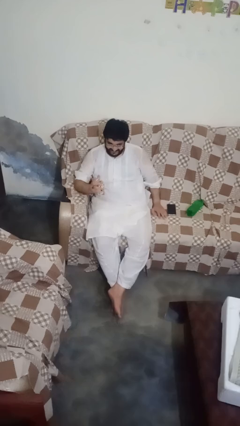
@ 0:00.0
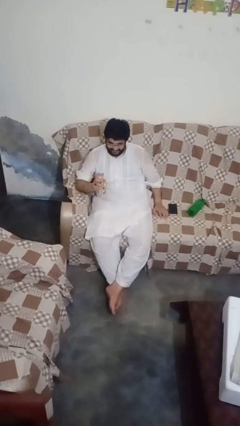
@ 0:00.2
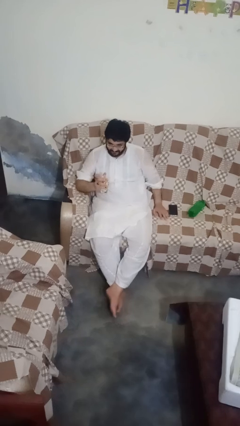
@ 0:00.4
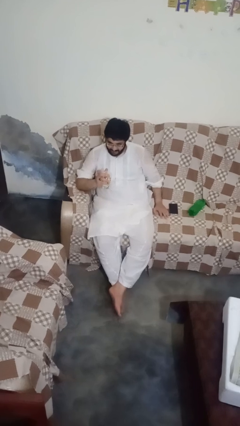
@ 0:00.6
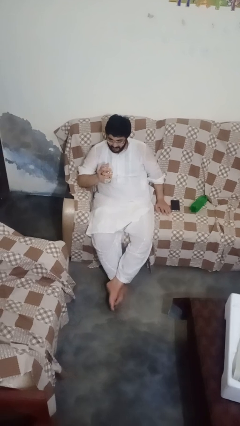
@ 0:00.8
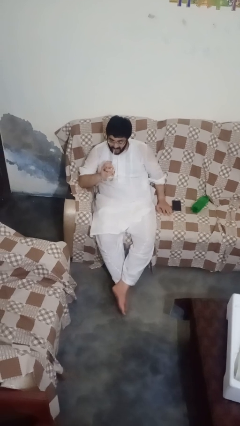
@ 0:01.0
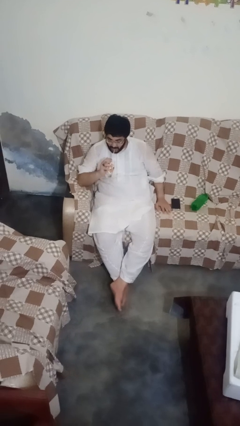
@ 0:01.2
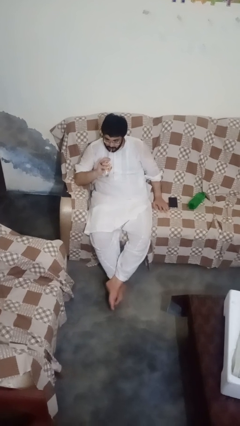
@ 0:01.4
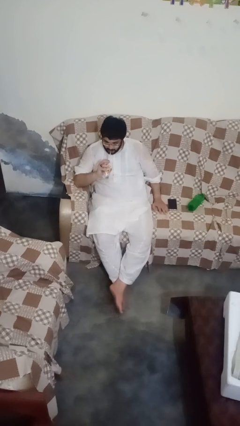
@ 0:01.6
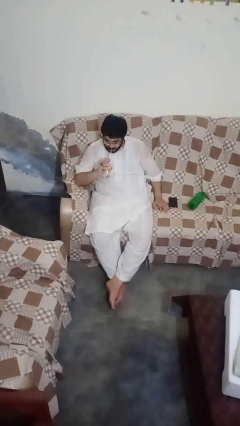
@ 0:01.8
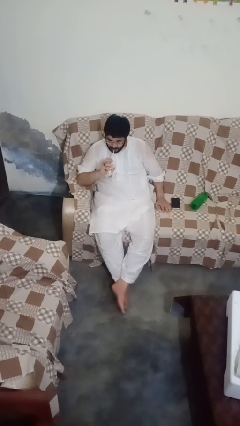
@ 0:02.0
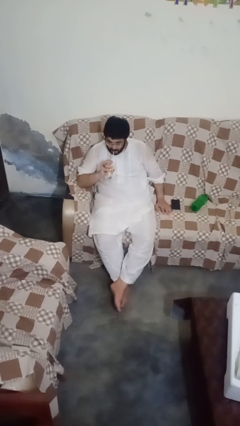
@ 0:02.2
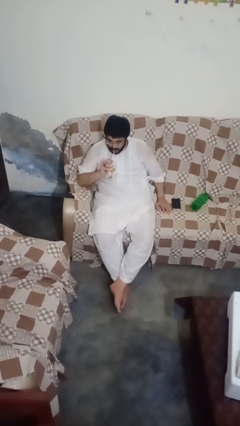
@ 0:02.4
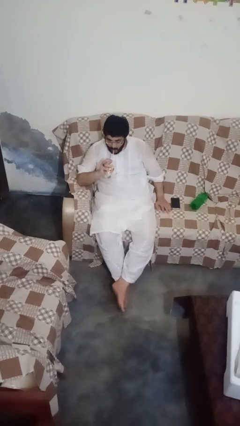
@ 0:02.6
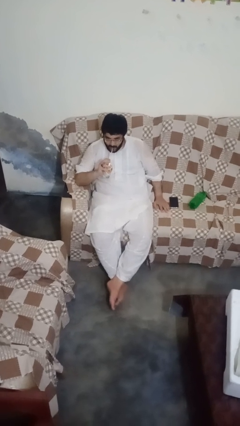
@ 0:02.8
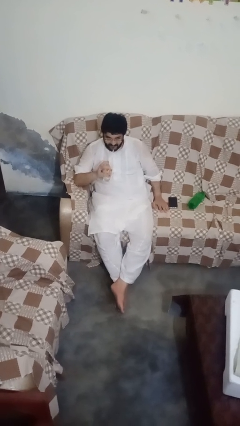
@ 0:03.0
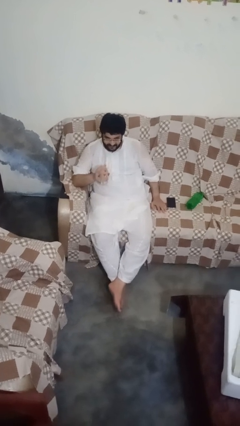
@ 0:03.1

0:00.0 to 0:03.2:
person drinks from straw

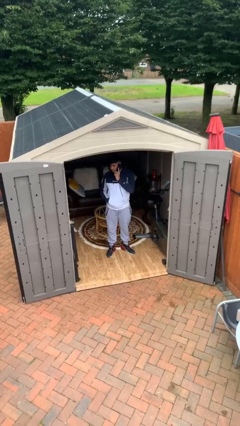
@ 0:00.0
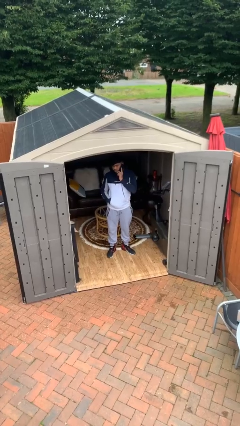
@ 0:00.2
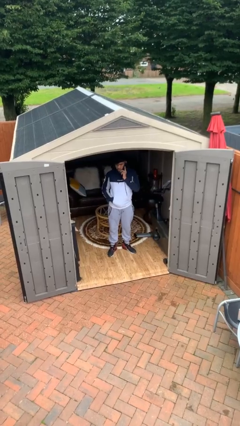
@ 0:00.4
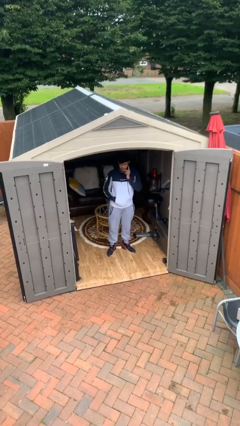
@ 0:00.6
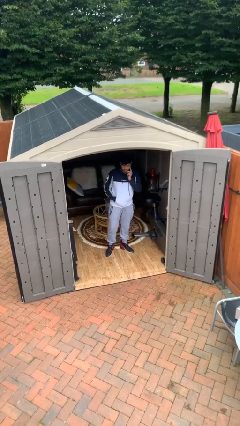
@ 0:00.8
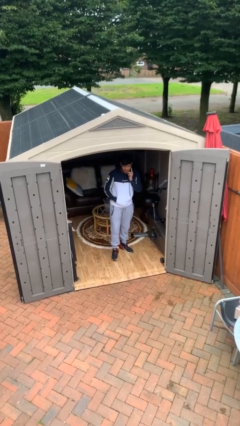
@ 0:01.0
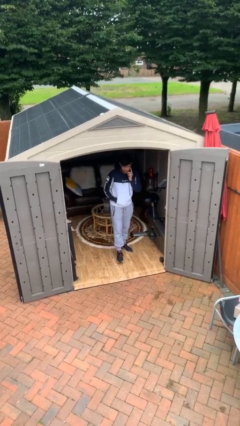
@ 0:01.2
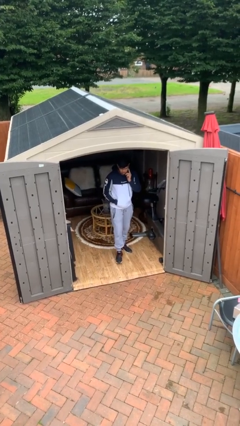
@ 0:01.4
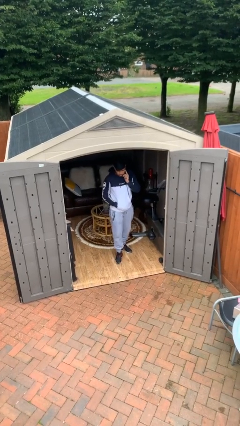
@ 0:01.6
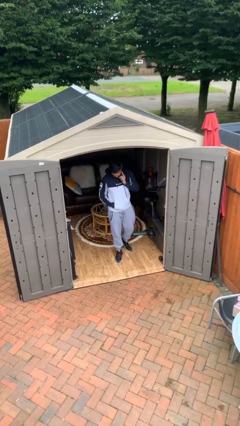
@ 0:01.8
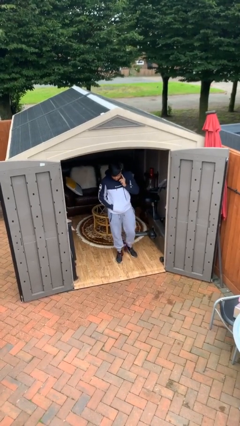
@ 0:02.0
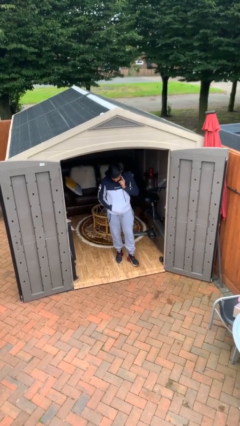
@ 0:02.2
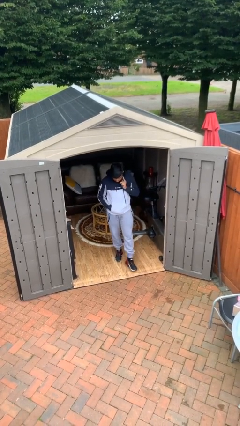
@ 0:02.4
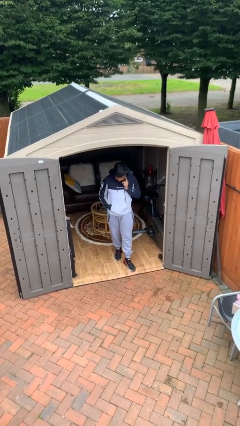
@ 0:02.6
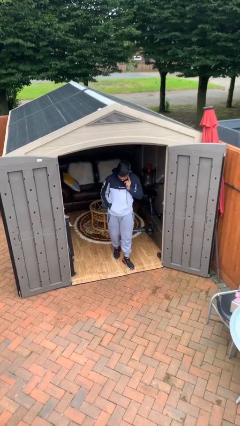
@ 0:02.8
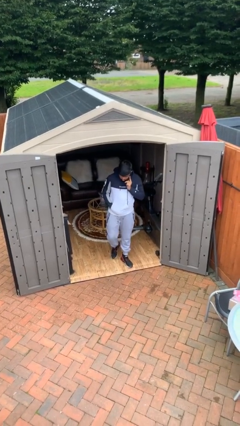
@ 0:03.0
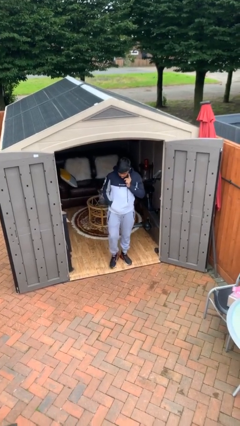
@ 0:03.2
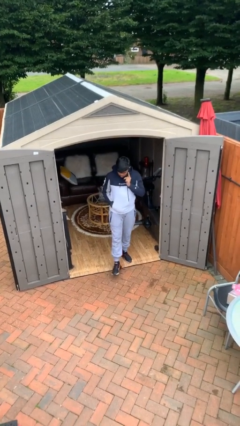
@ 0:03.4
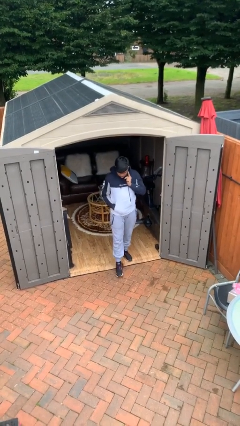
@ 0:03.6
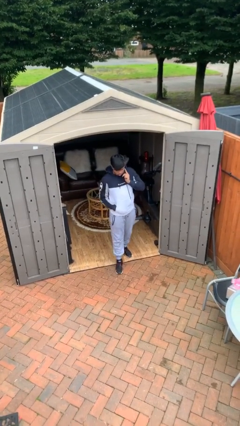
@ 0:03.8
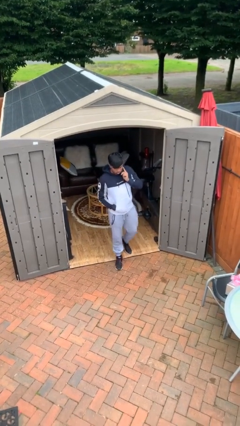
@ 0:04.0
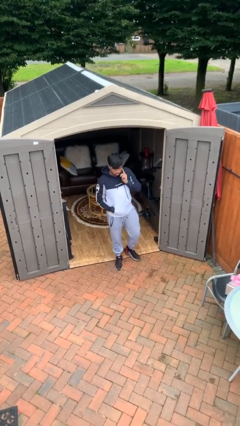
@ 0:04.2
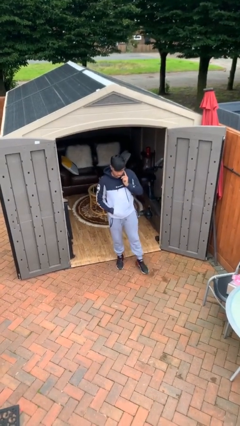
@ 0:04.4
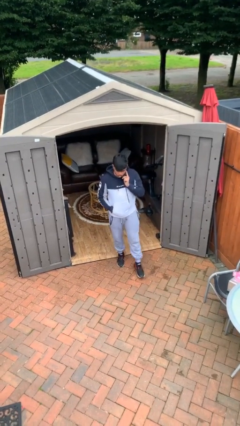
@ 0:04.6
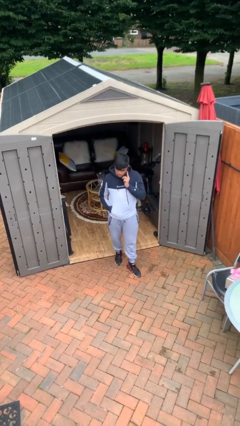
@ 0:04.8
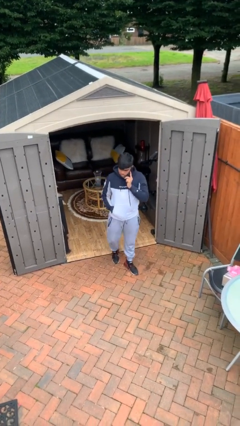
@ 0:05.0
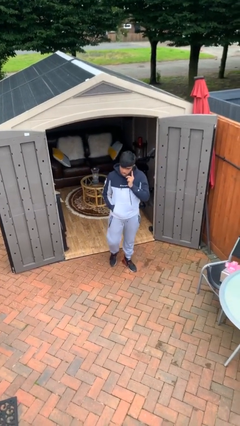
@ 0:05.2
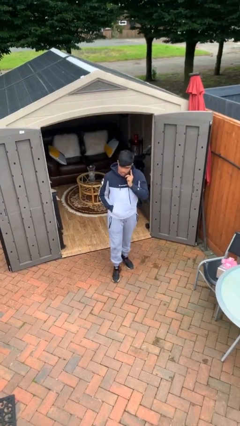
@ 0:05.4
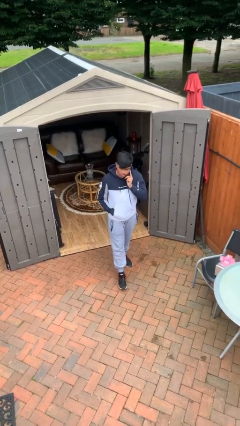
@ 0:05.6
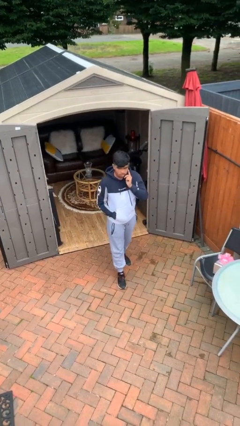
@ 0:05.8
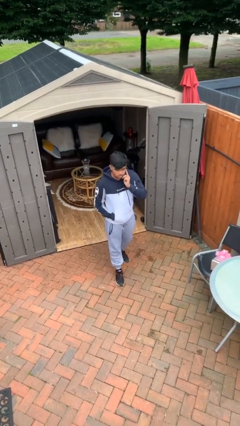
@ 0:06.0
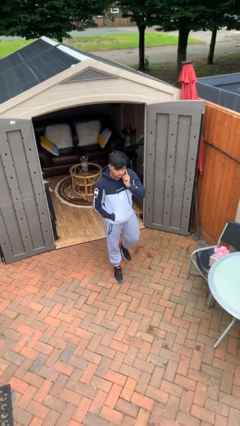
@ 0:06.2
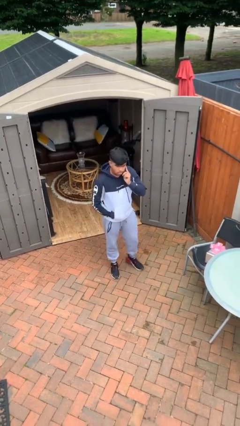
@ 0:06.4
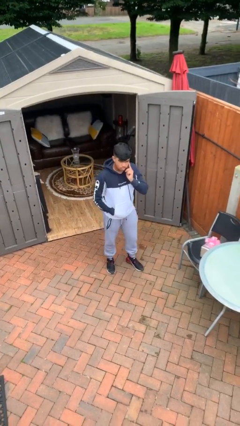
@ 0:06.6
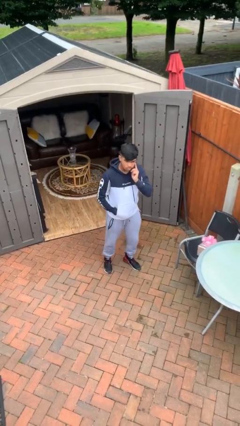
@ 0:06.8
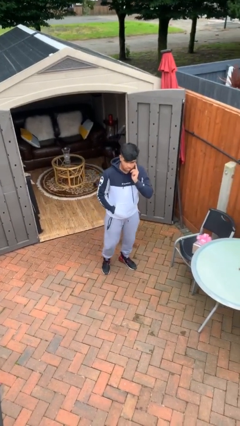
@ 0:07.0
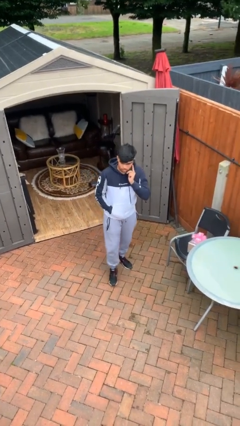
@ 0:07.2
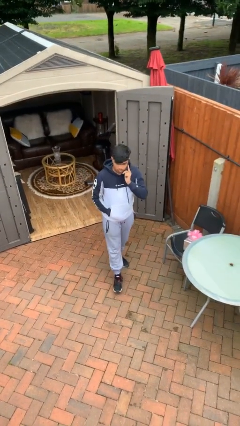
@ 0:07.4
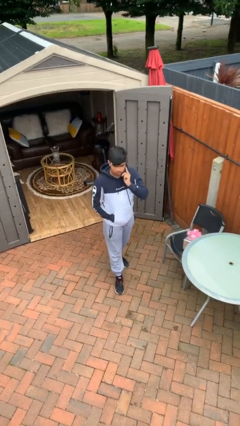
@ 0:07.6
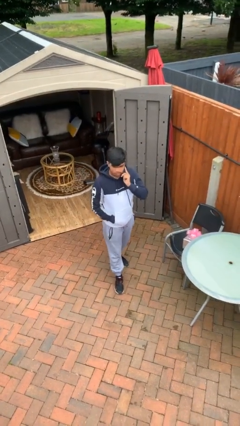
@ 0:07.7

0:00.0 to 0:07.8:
person enters scene through structure

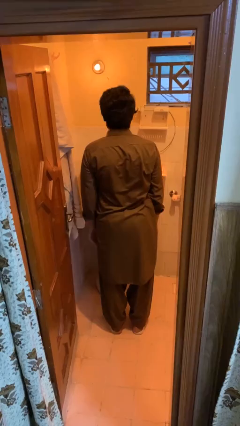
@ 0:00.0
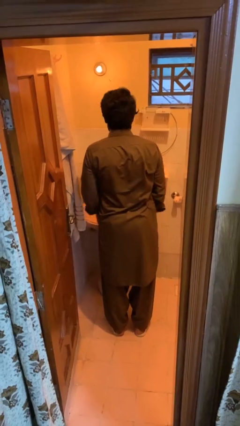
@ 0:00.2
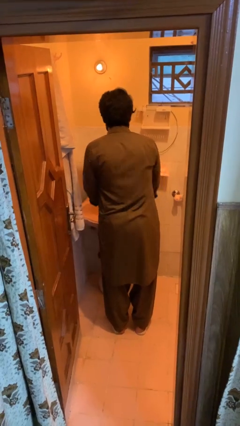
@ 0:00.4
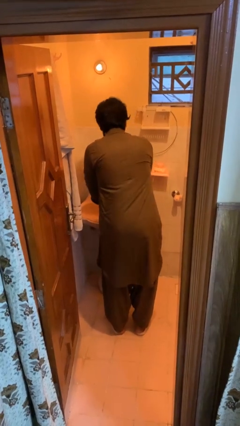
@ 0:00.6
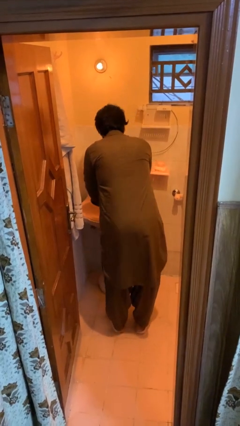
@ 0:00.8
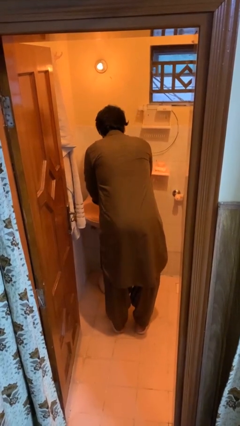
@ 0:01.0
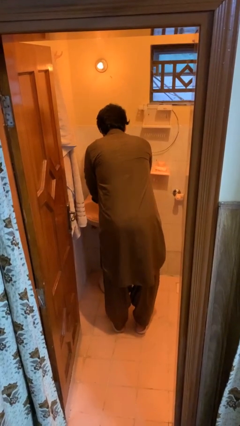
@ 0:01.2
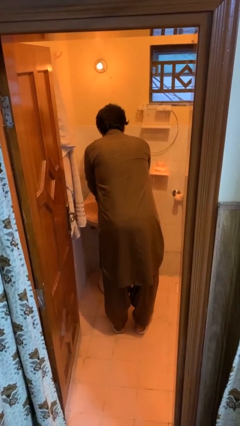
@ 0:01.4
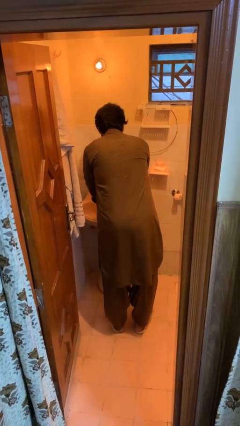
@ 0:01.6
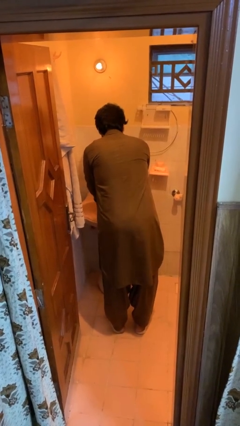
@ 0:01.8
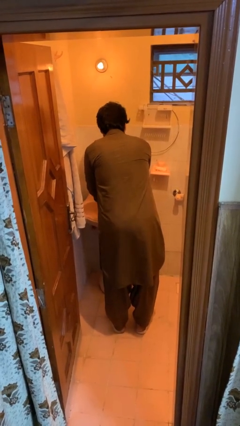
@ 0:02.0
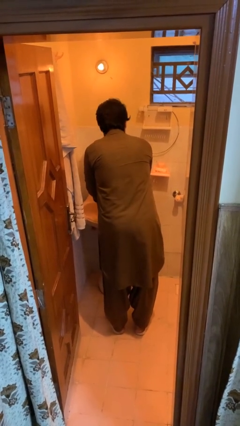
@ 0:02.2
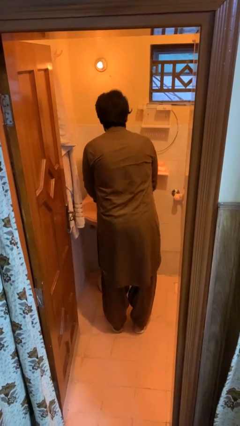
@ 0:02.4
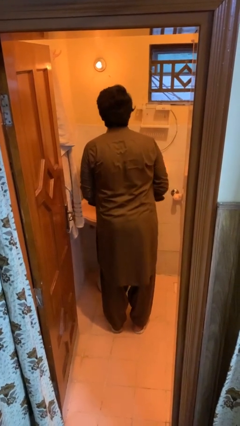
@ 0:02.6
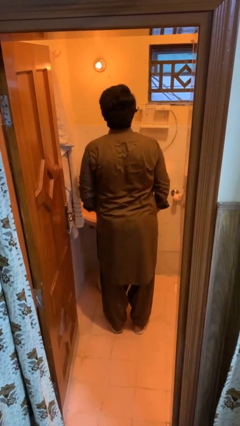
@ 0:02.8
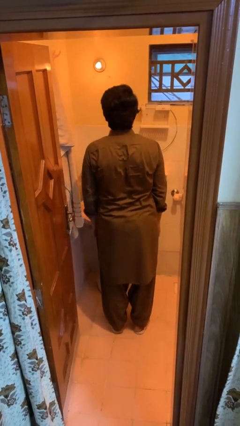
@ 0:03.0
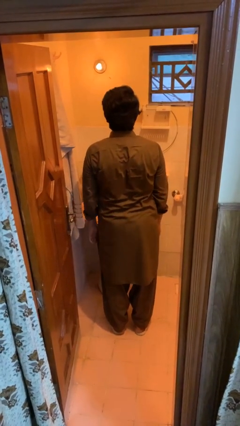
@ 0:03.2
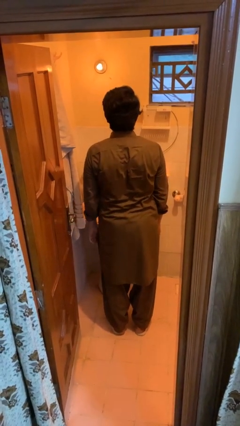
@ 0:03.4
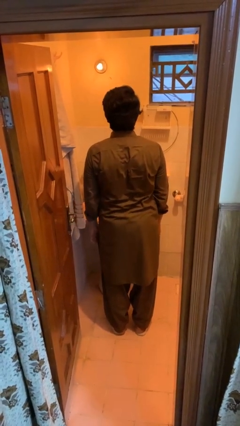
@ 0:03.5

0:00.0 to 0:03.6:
person washes hands

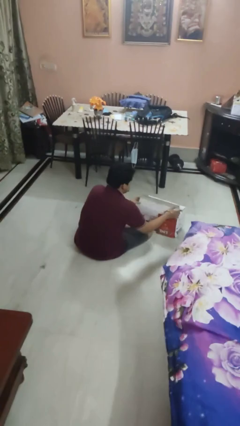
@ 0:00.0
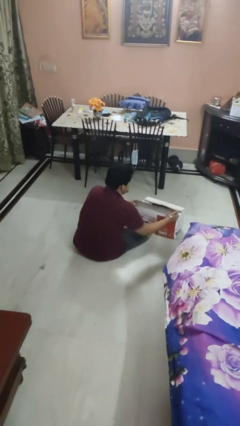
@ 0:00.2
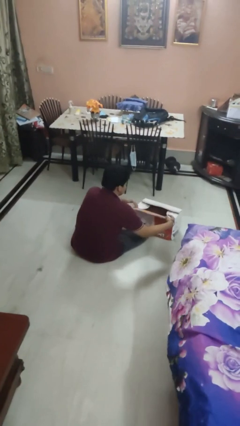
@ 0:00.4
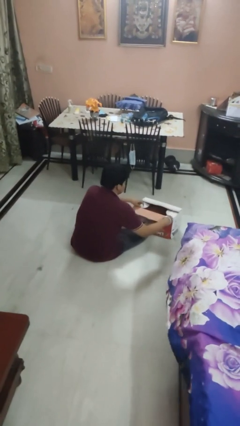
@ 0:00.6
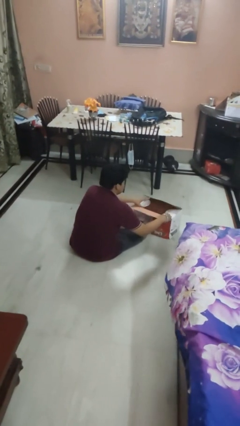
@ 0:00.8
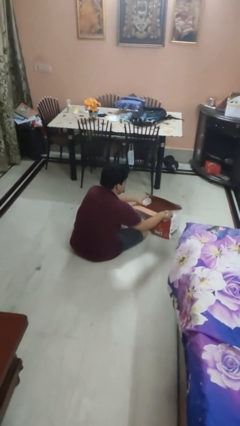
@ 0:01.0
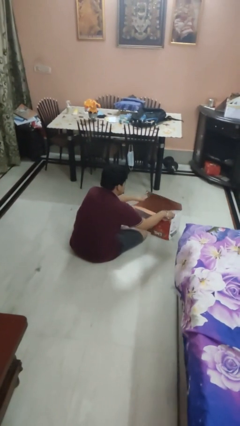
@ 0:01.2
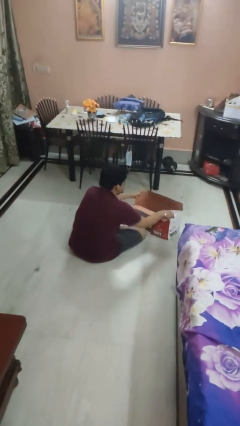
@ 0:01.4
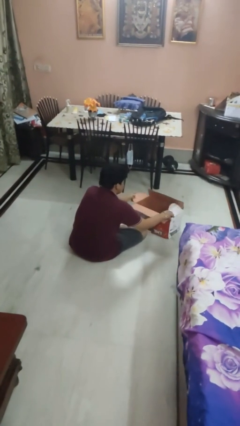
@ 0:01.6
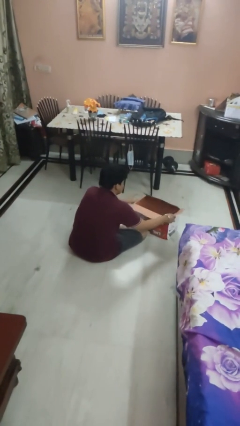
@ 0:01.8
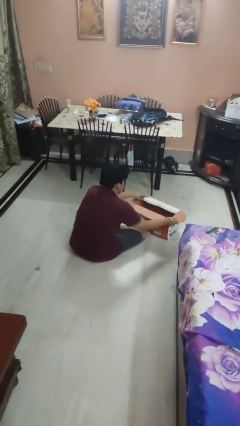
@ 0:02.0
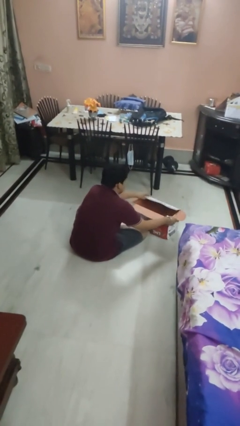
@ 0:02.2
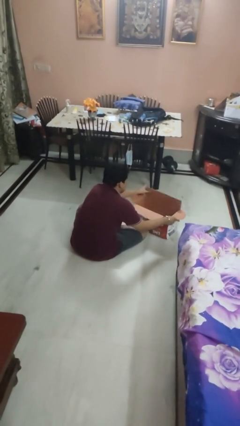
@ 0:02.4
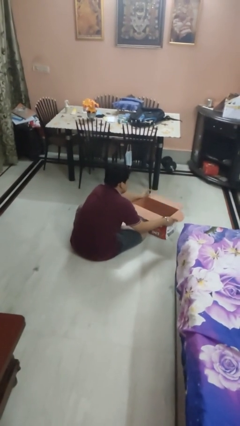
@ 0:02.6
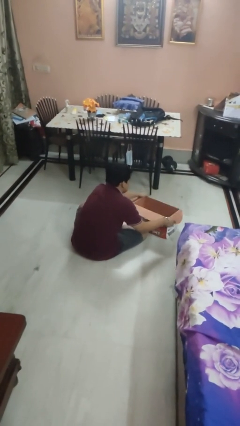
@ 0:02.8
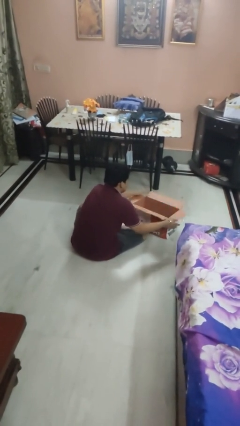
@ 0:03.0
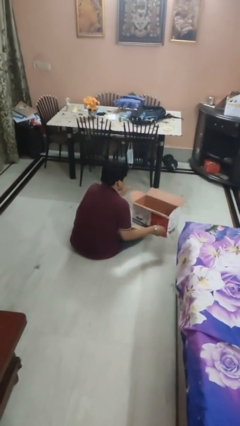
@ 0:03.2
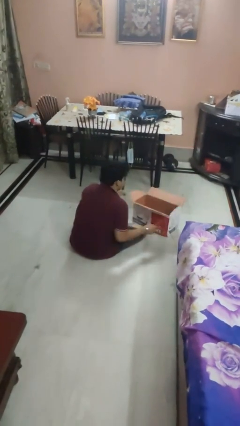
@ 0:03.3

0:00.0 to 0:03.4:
person opens box
